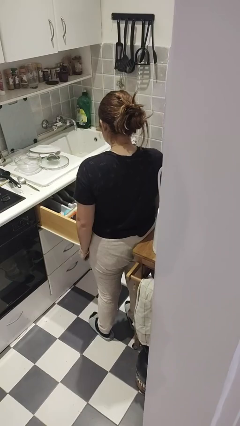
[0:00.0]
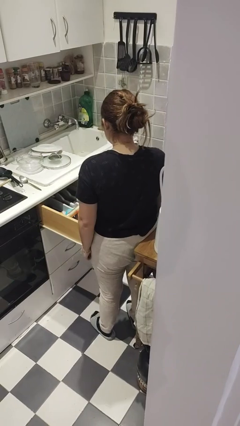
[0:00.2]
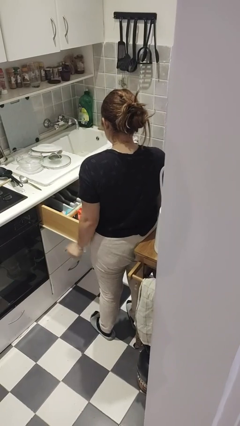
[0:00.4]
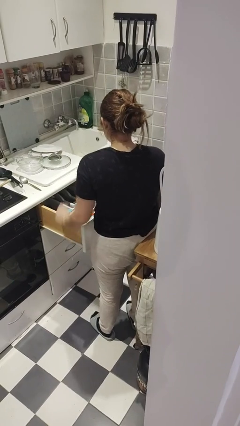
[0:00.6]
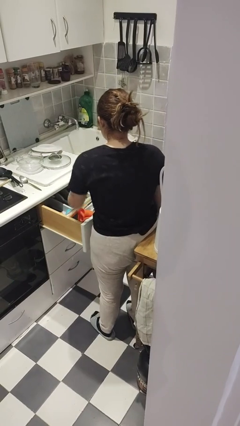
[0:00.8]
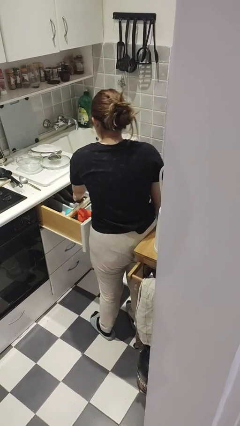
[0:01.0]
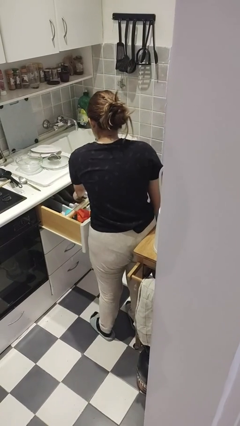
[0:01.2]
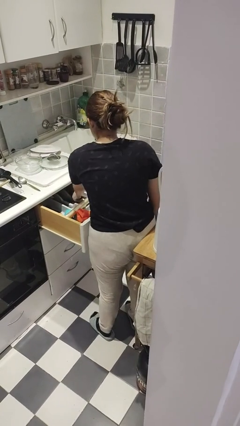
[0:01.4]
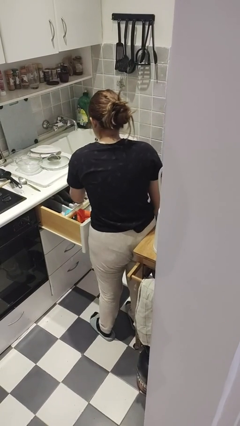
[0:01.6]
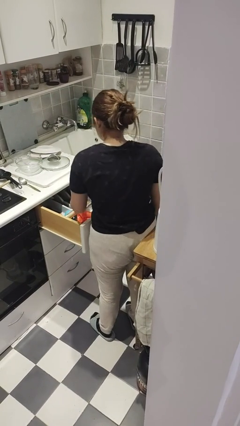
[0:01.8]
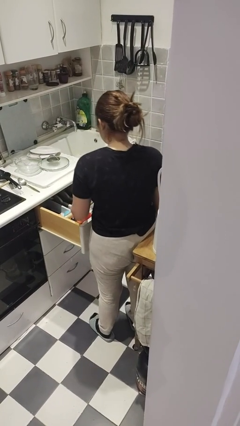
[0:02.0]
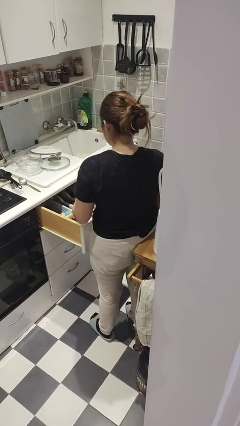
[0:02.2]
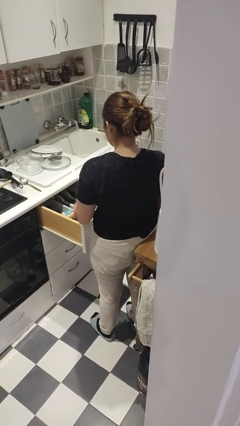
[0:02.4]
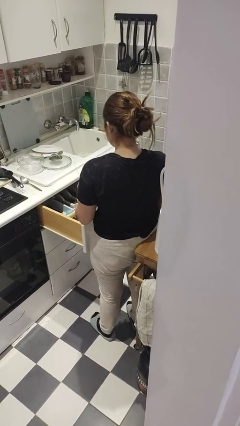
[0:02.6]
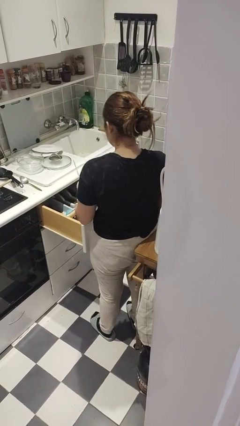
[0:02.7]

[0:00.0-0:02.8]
person takes object from kitchen drawer

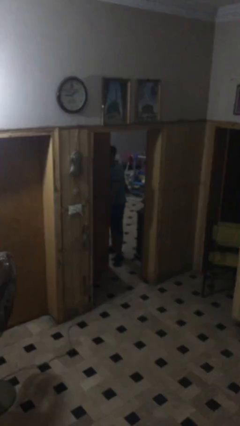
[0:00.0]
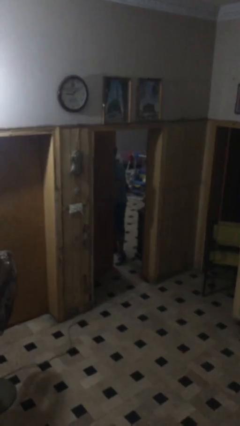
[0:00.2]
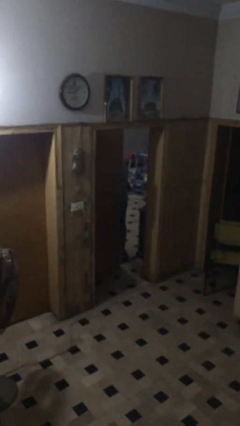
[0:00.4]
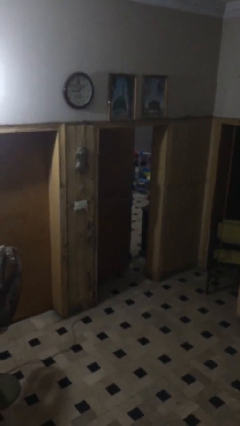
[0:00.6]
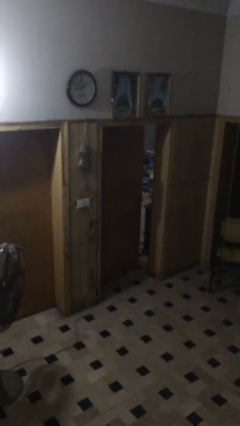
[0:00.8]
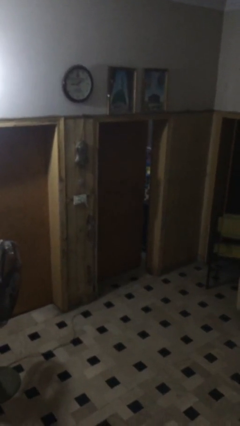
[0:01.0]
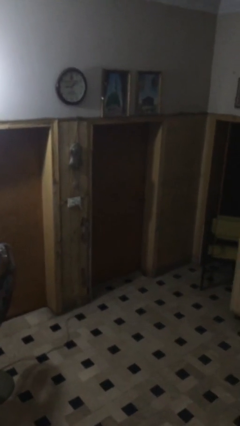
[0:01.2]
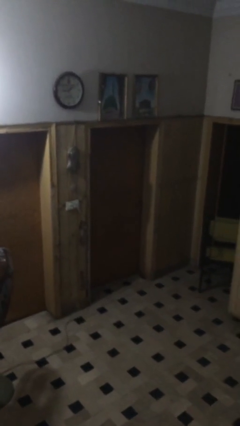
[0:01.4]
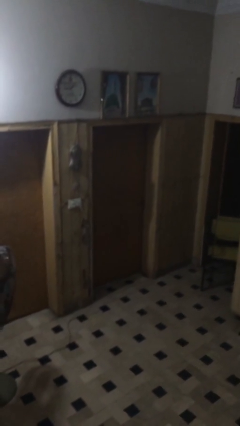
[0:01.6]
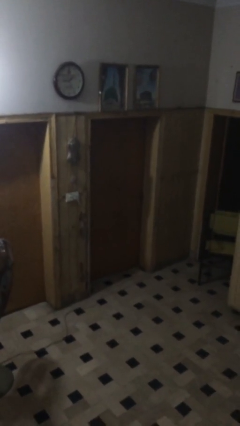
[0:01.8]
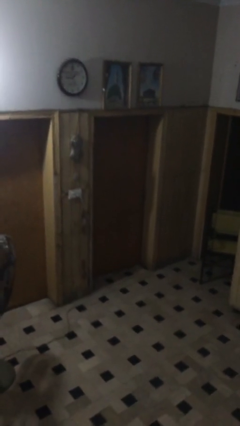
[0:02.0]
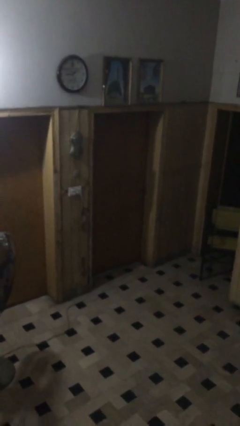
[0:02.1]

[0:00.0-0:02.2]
person closes facility door

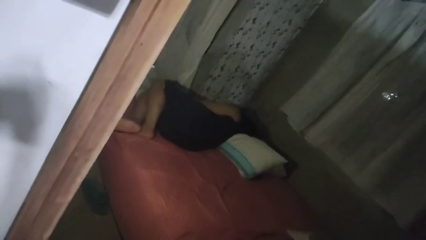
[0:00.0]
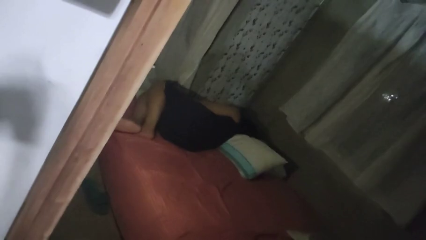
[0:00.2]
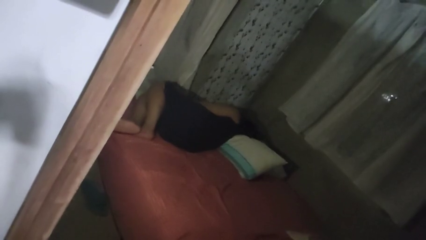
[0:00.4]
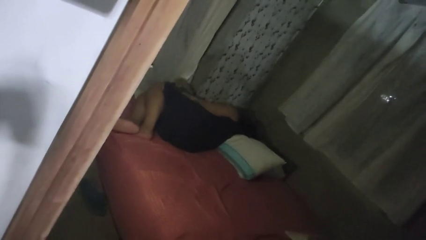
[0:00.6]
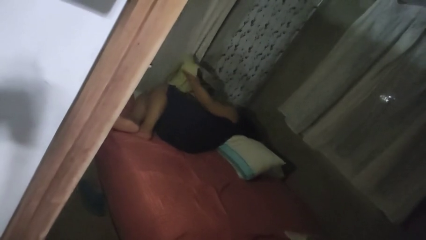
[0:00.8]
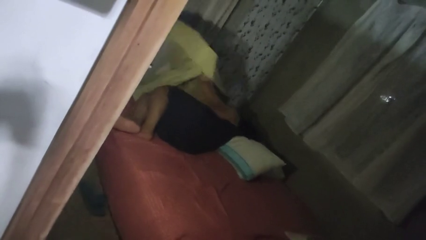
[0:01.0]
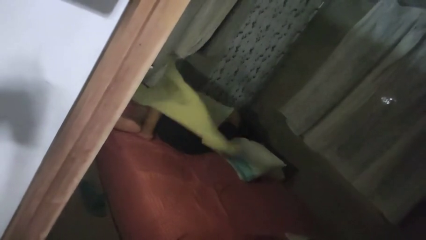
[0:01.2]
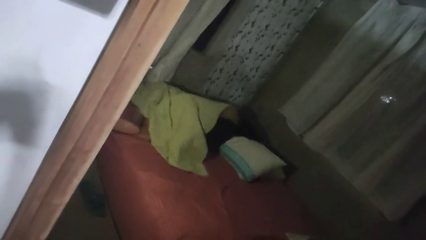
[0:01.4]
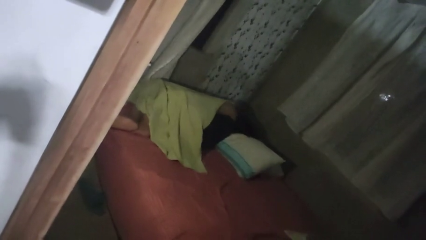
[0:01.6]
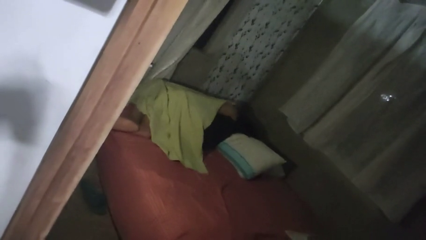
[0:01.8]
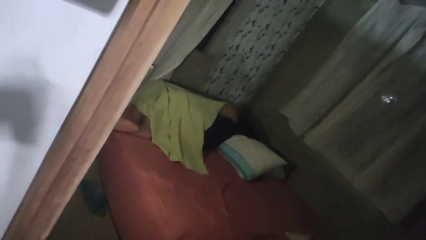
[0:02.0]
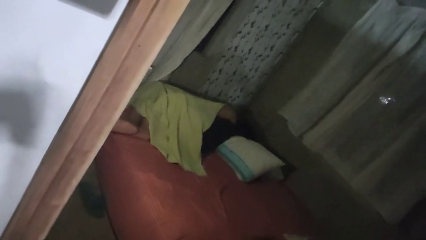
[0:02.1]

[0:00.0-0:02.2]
person covers with bedsheets

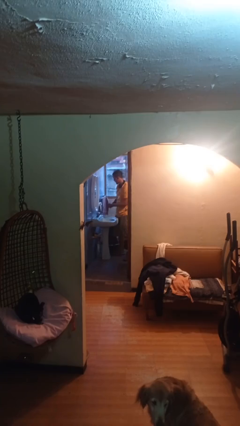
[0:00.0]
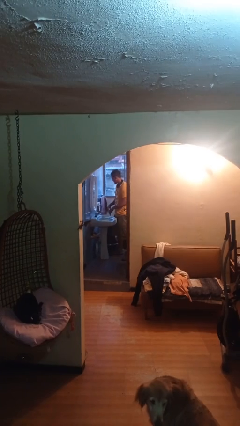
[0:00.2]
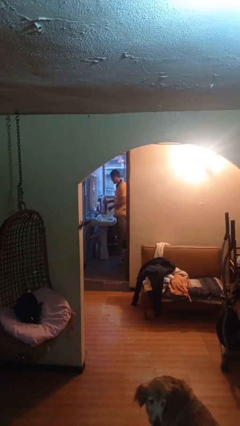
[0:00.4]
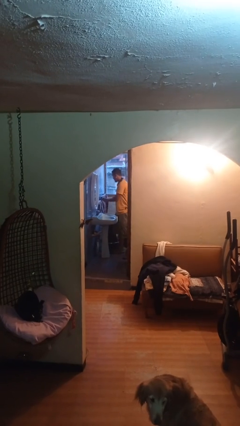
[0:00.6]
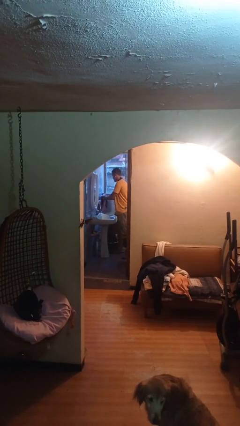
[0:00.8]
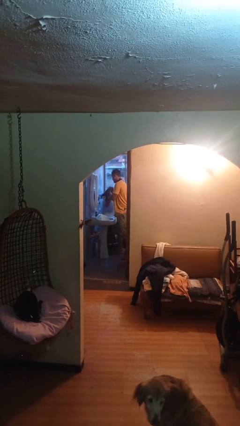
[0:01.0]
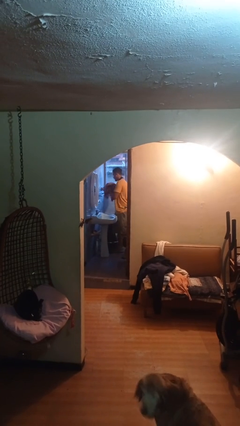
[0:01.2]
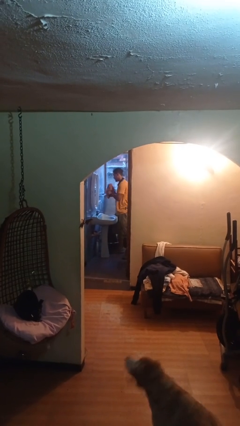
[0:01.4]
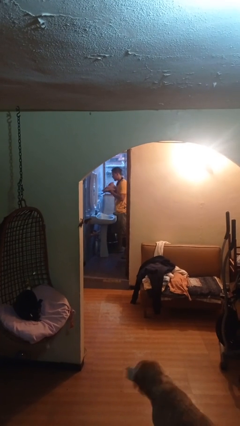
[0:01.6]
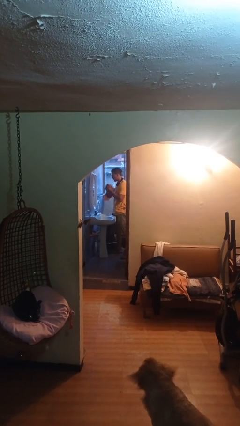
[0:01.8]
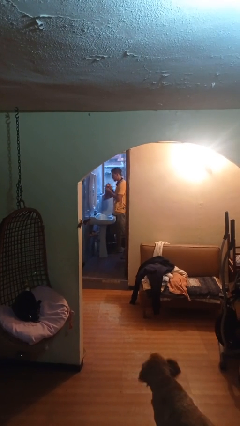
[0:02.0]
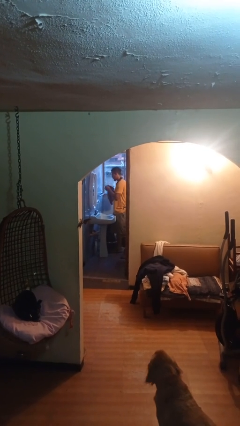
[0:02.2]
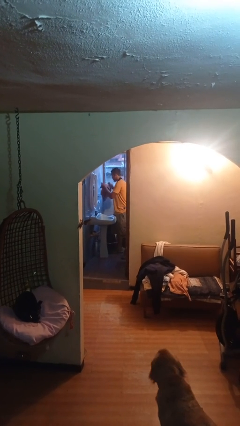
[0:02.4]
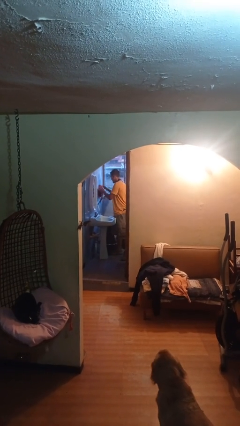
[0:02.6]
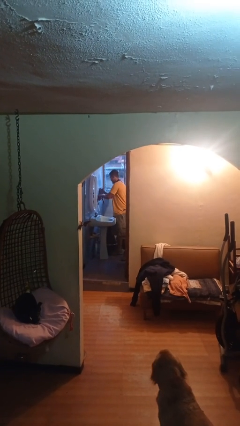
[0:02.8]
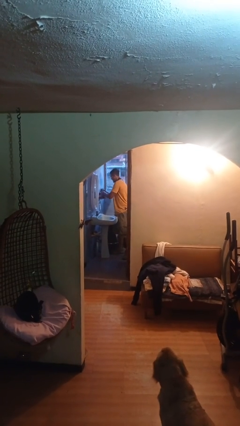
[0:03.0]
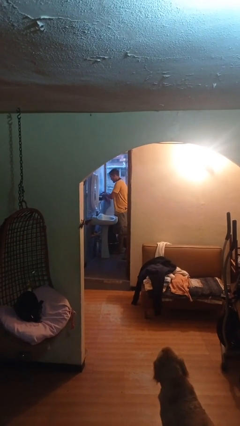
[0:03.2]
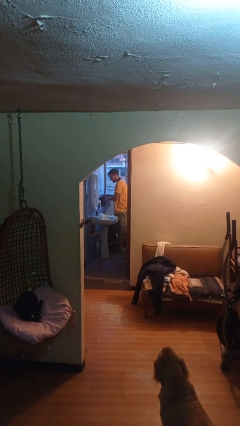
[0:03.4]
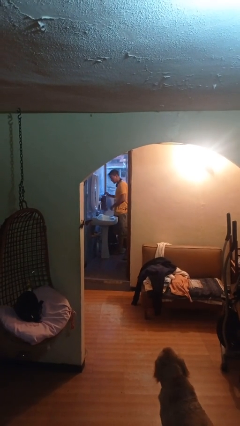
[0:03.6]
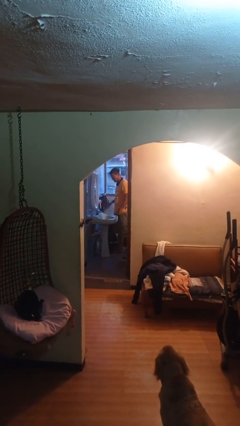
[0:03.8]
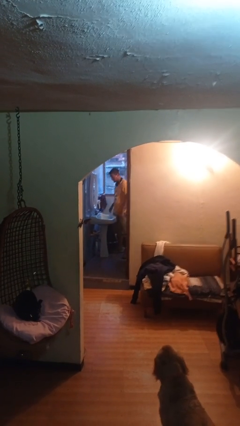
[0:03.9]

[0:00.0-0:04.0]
person dries hands with towel

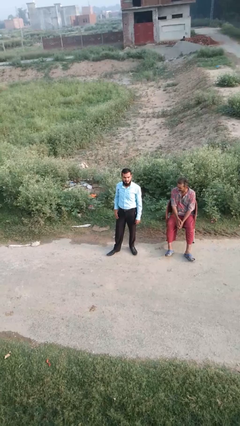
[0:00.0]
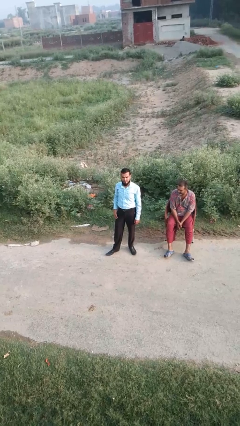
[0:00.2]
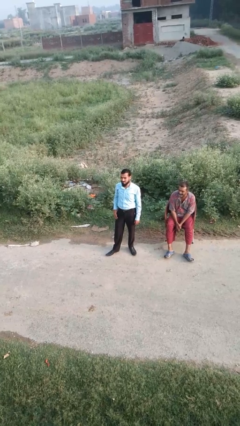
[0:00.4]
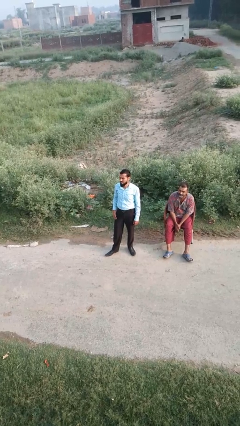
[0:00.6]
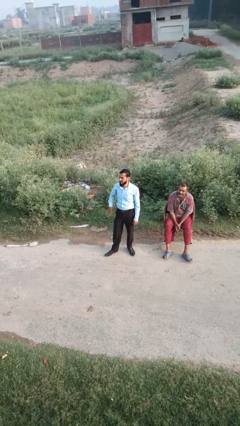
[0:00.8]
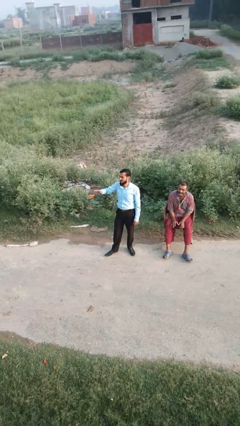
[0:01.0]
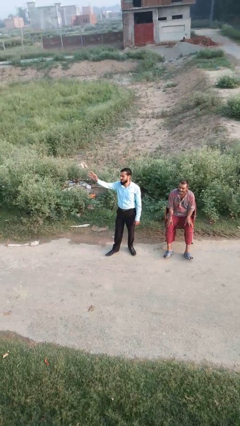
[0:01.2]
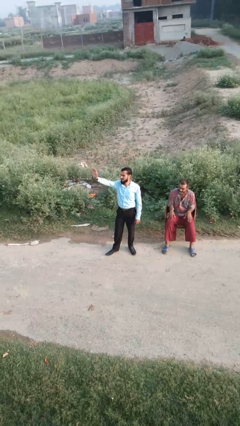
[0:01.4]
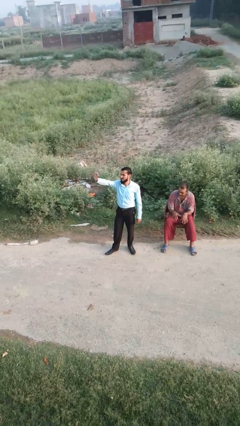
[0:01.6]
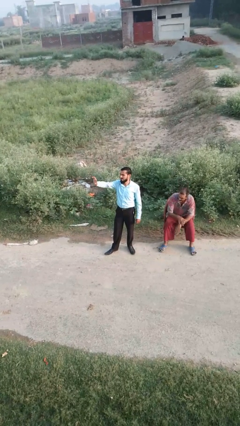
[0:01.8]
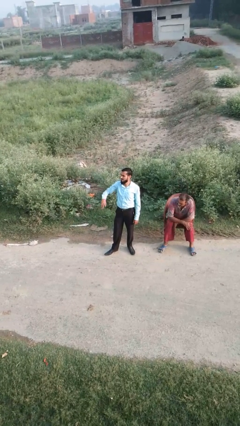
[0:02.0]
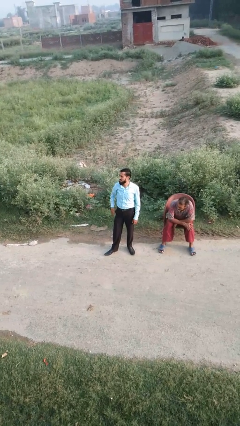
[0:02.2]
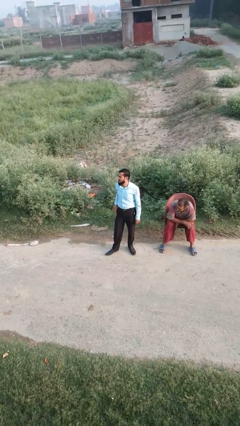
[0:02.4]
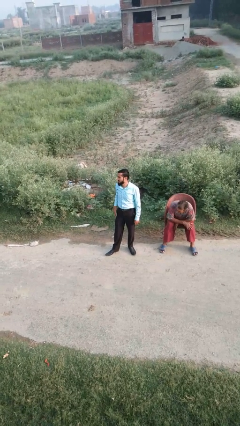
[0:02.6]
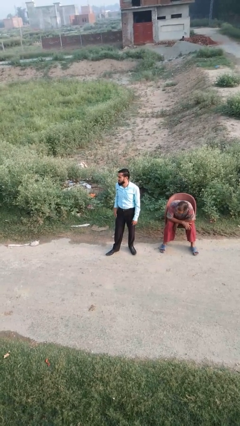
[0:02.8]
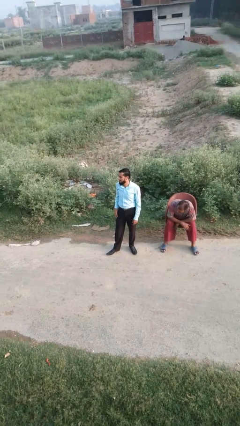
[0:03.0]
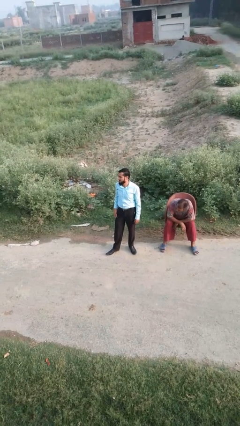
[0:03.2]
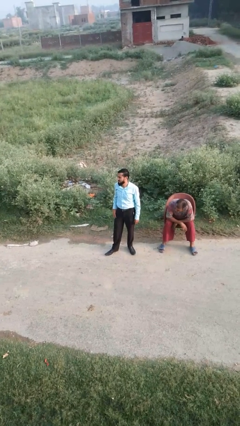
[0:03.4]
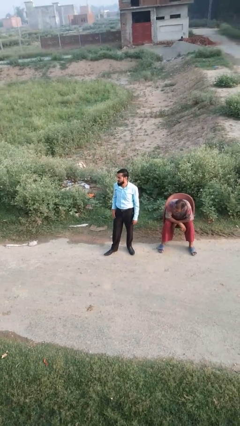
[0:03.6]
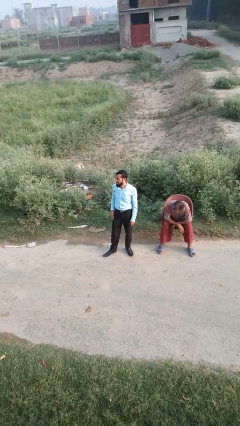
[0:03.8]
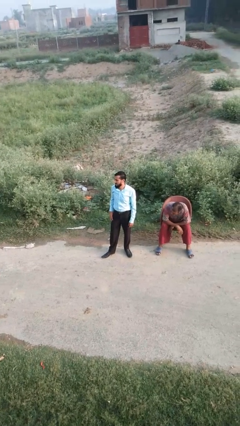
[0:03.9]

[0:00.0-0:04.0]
person waves at person

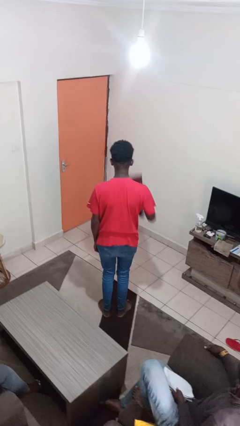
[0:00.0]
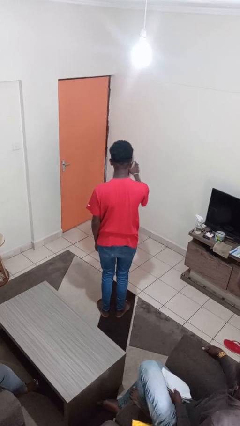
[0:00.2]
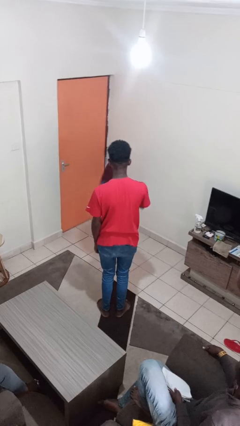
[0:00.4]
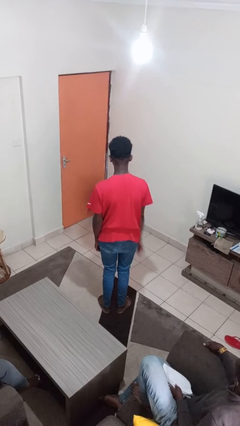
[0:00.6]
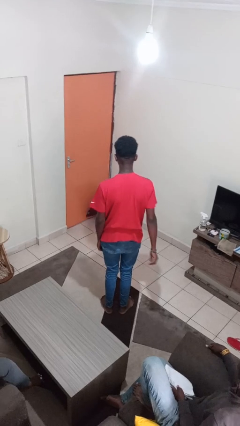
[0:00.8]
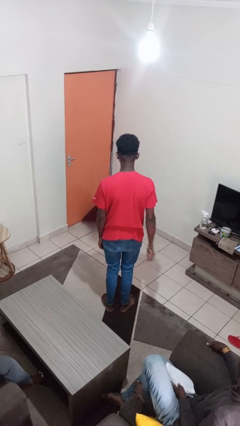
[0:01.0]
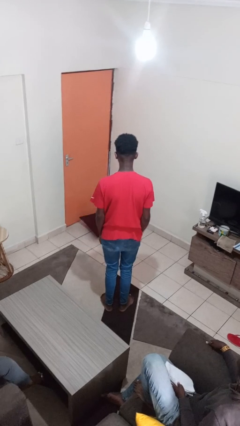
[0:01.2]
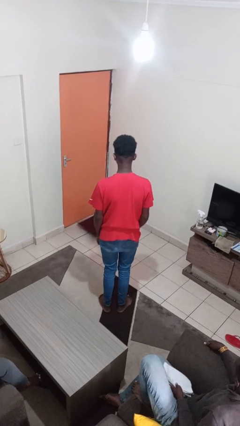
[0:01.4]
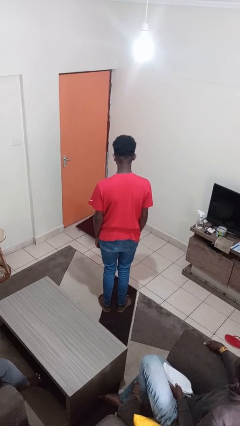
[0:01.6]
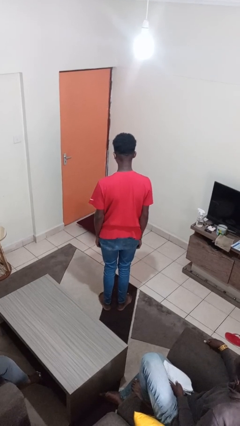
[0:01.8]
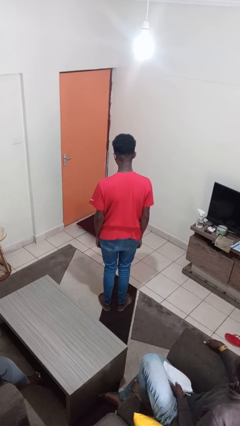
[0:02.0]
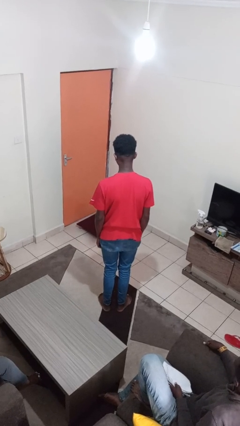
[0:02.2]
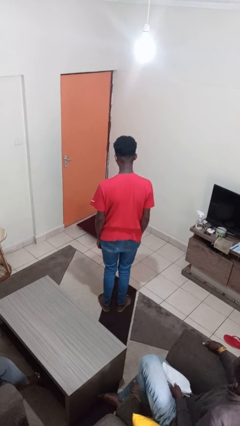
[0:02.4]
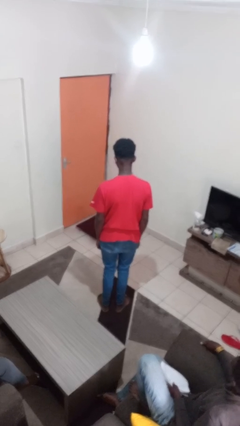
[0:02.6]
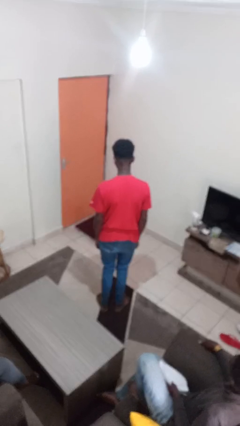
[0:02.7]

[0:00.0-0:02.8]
person throws object to ground
